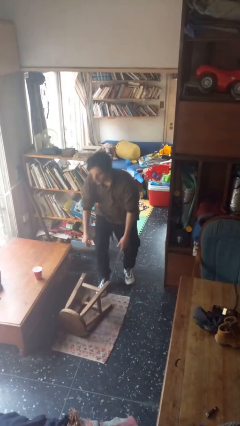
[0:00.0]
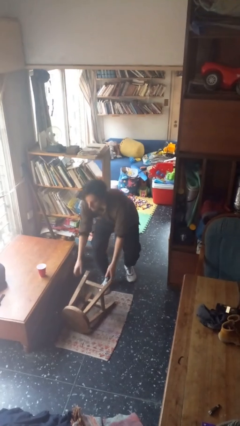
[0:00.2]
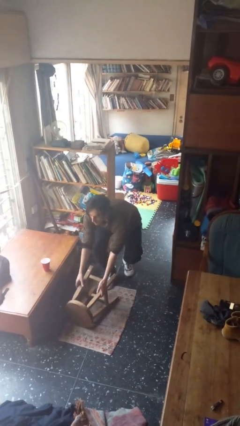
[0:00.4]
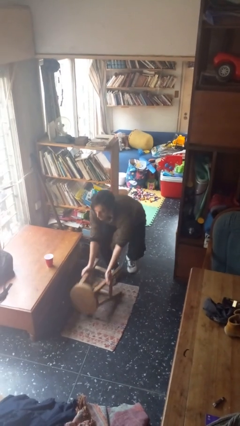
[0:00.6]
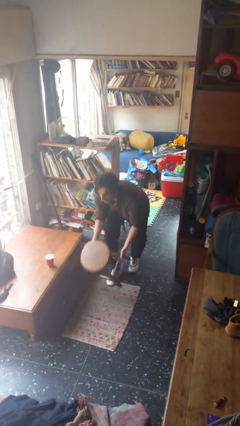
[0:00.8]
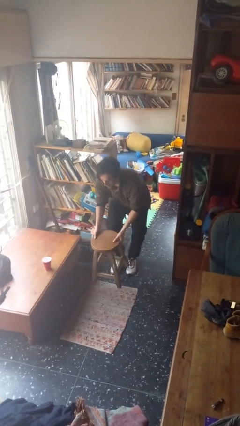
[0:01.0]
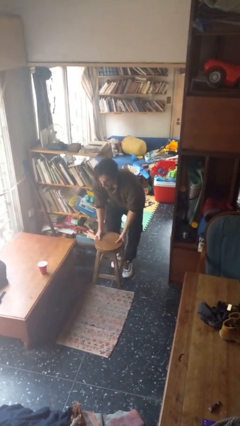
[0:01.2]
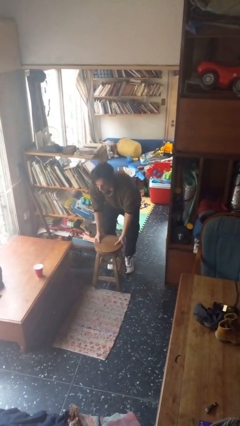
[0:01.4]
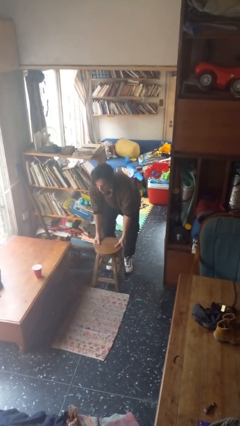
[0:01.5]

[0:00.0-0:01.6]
person sets upright furniture

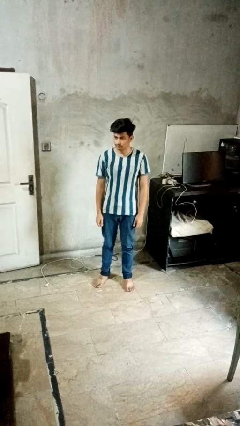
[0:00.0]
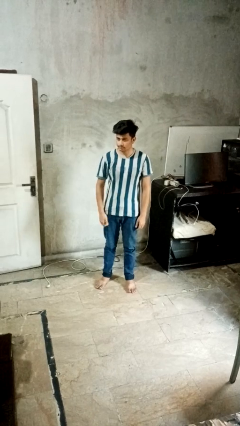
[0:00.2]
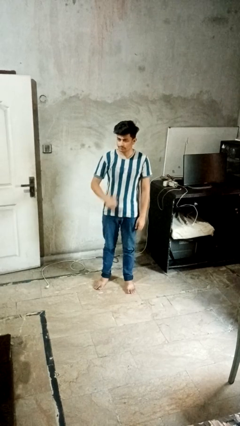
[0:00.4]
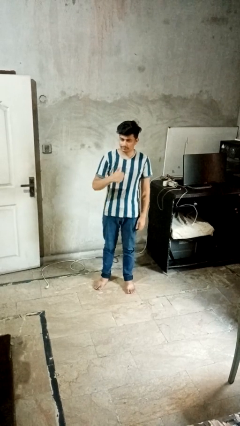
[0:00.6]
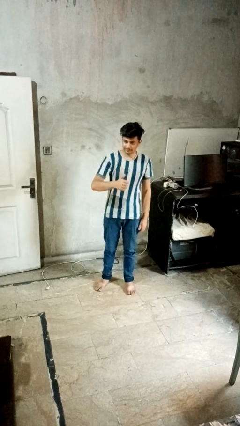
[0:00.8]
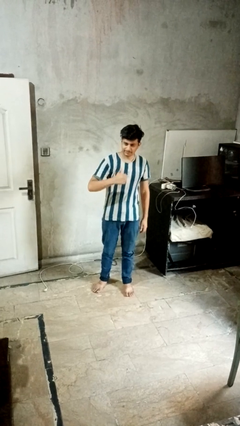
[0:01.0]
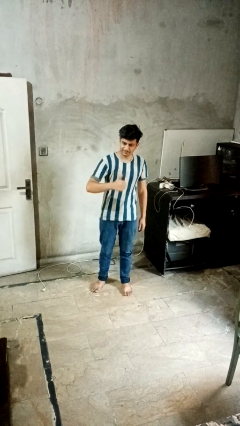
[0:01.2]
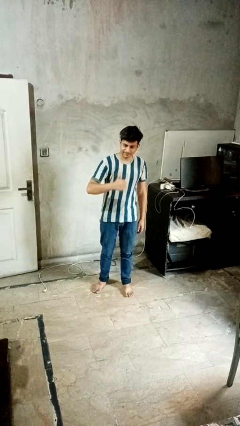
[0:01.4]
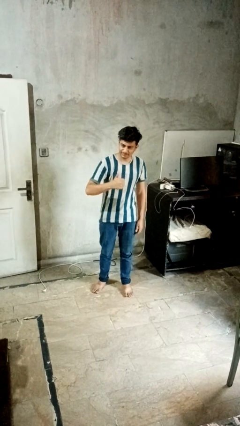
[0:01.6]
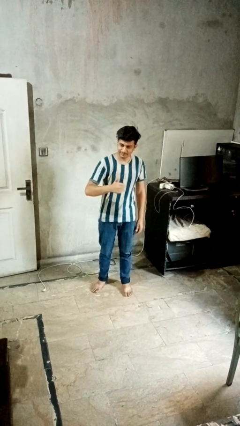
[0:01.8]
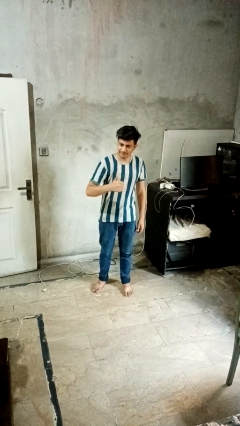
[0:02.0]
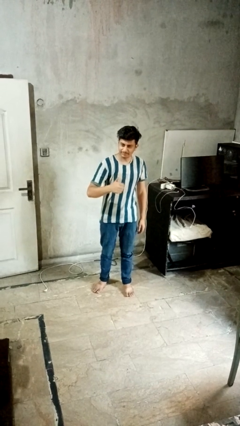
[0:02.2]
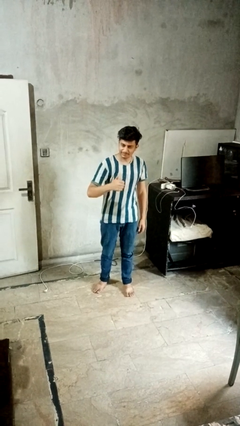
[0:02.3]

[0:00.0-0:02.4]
person gestures thumbs up

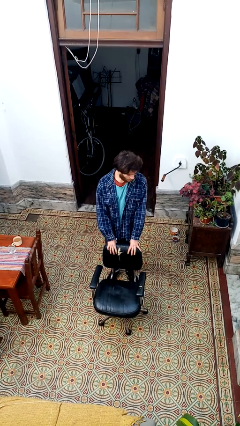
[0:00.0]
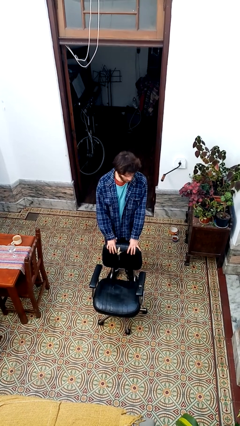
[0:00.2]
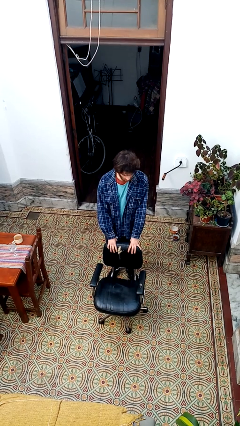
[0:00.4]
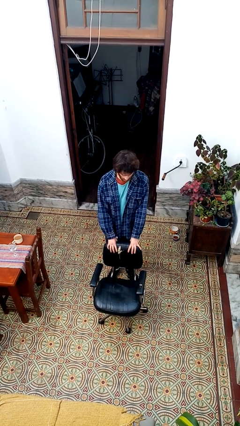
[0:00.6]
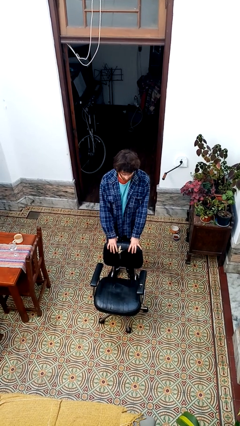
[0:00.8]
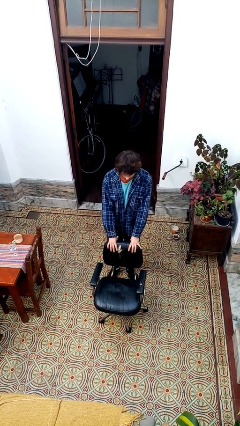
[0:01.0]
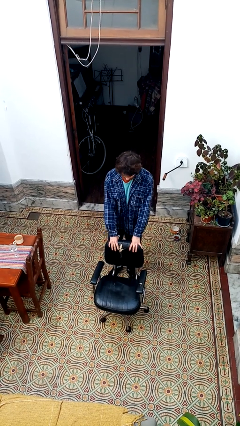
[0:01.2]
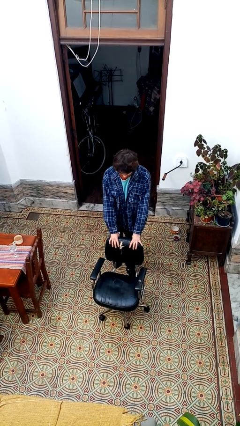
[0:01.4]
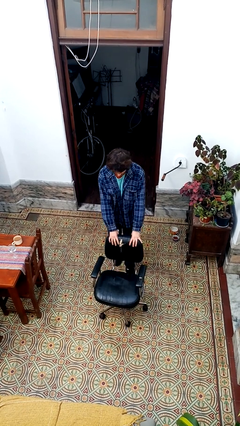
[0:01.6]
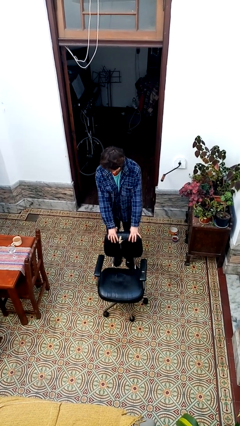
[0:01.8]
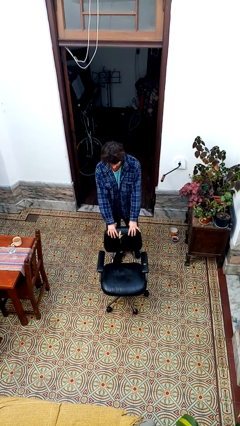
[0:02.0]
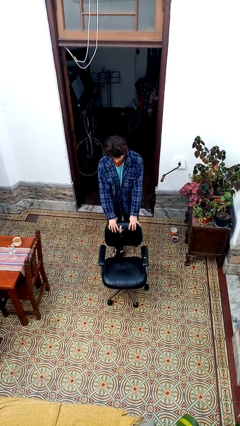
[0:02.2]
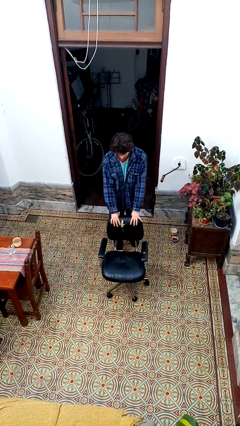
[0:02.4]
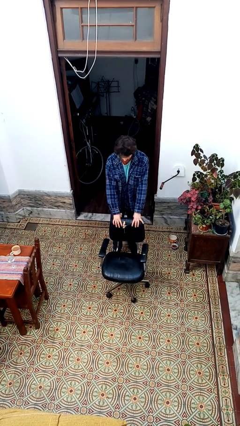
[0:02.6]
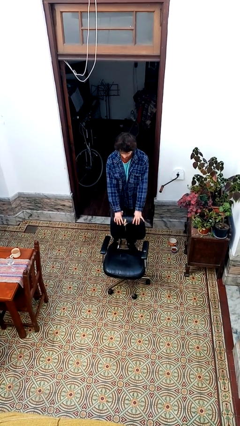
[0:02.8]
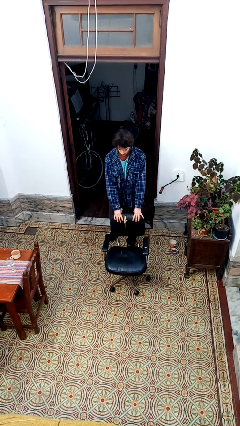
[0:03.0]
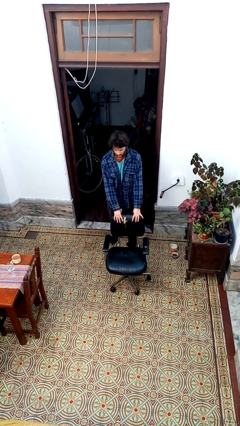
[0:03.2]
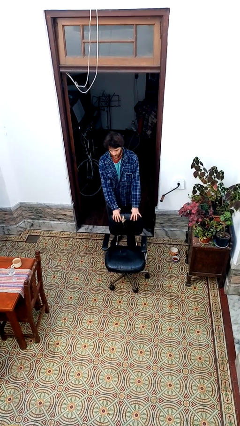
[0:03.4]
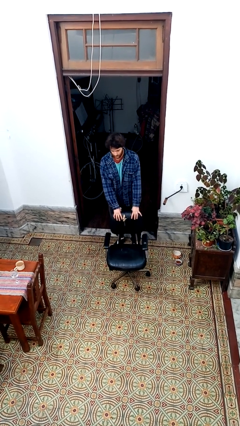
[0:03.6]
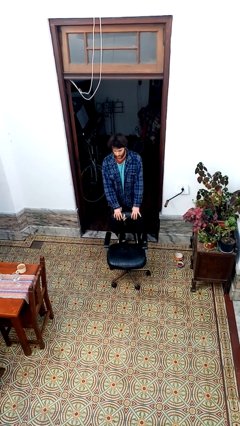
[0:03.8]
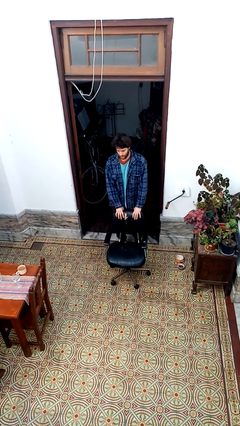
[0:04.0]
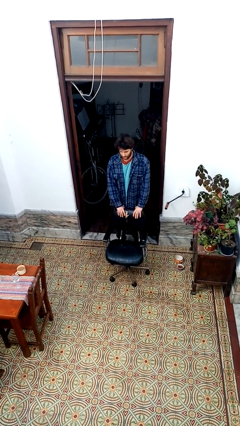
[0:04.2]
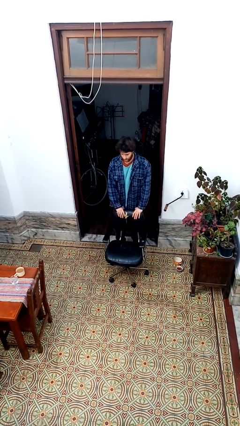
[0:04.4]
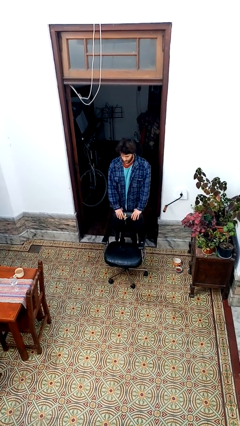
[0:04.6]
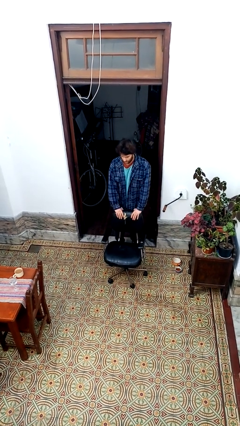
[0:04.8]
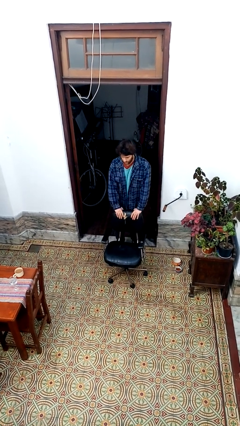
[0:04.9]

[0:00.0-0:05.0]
person pulls wheeled cart

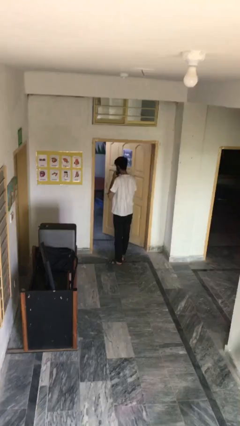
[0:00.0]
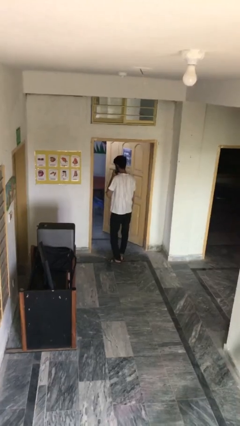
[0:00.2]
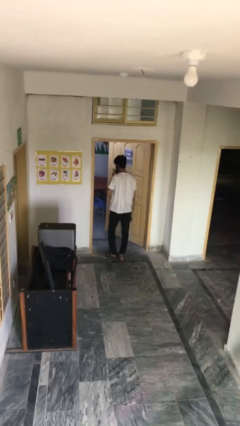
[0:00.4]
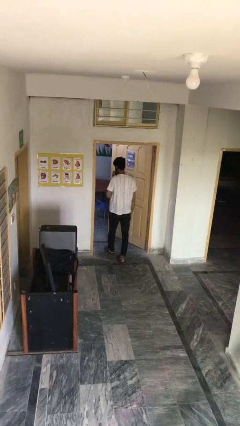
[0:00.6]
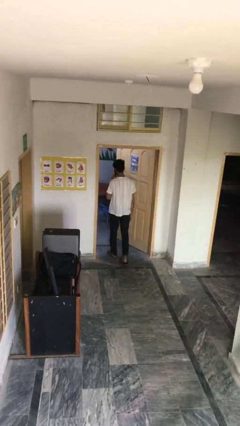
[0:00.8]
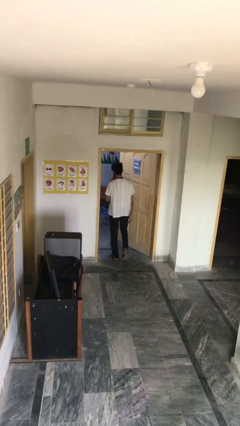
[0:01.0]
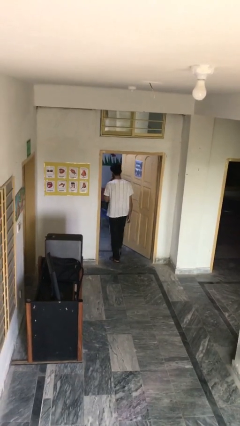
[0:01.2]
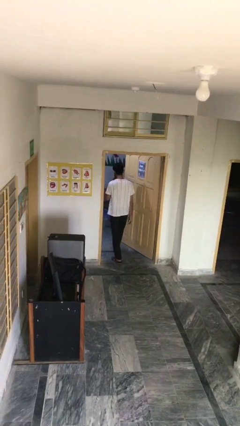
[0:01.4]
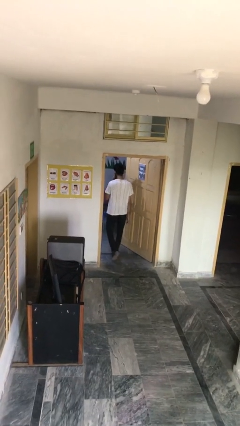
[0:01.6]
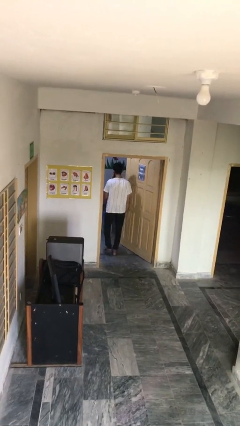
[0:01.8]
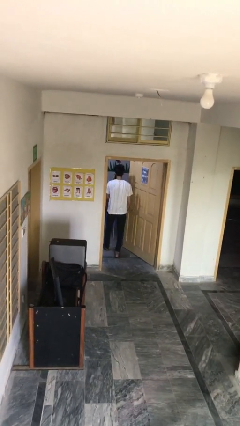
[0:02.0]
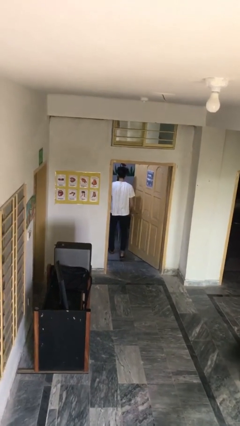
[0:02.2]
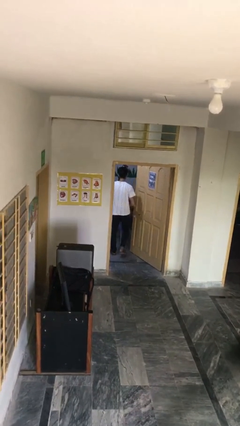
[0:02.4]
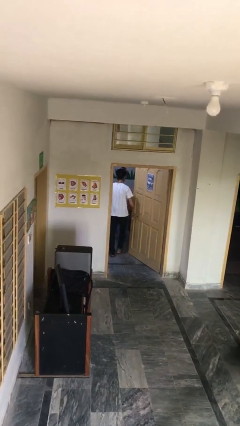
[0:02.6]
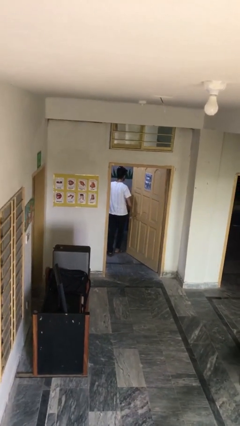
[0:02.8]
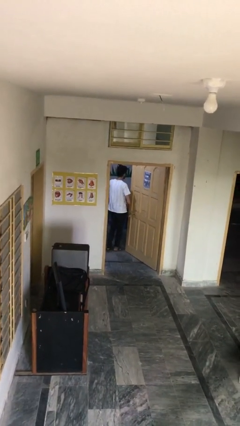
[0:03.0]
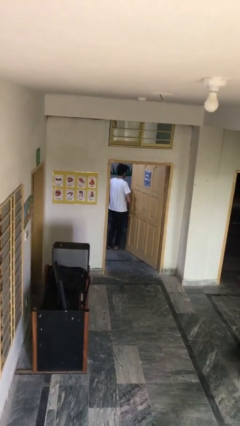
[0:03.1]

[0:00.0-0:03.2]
person exits scene through structure

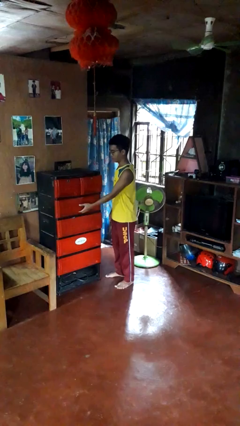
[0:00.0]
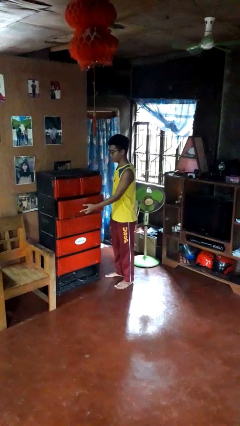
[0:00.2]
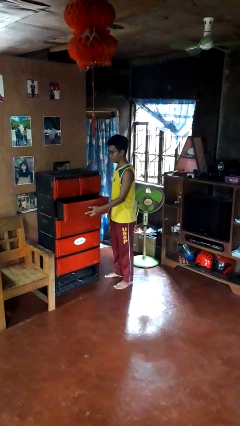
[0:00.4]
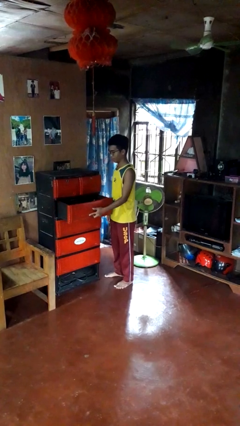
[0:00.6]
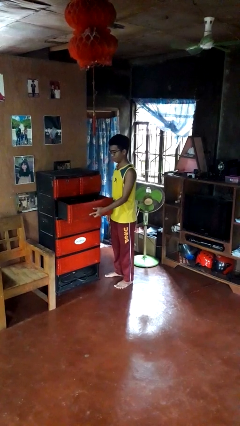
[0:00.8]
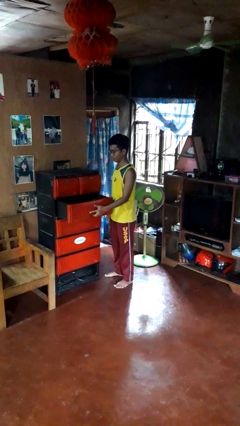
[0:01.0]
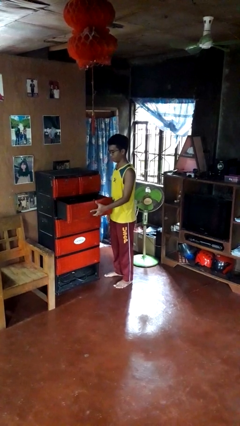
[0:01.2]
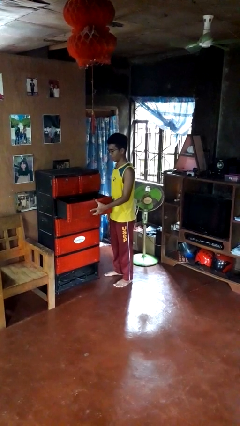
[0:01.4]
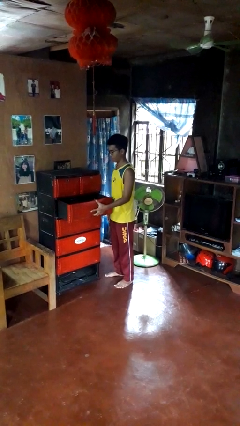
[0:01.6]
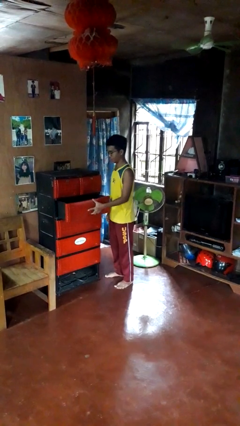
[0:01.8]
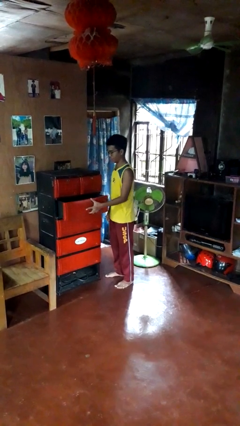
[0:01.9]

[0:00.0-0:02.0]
person opens dresser drawer

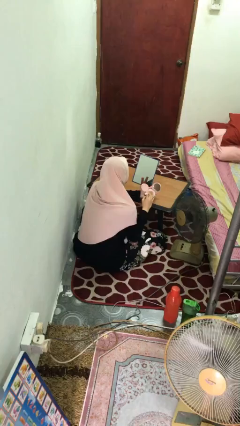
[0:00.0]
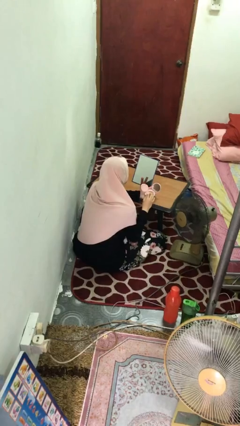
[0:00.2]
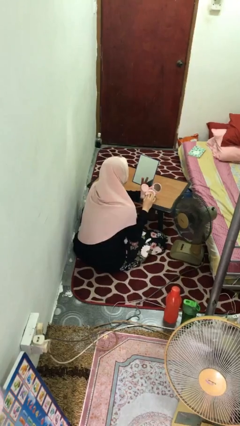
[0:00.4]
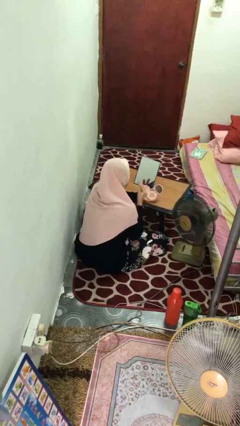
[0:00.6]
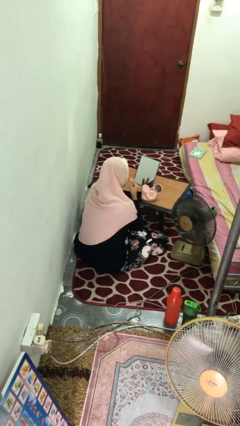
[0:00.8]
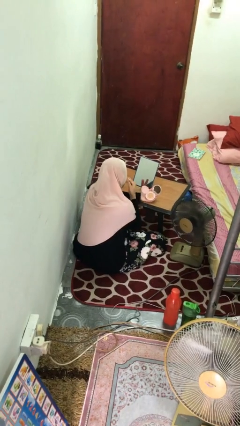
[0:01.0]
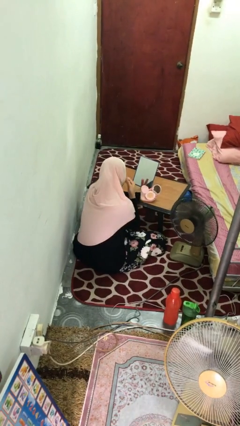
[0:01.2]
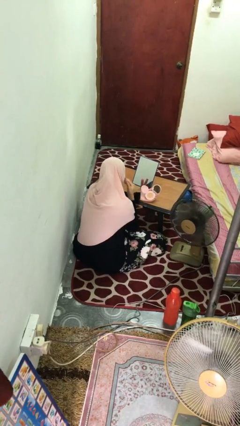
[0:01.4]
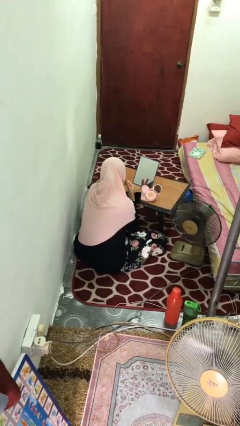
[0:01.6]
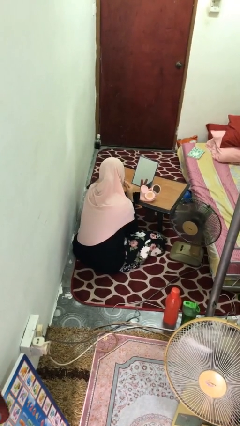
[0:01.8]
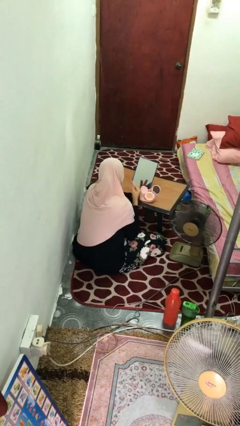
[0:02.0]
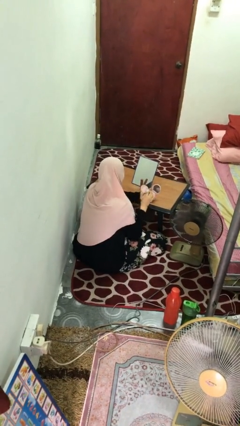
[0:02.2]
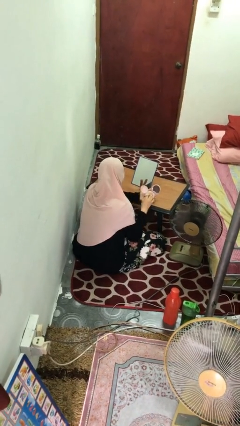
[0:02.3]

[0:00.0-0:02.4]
person applies foundation makeup

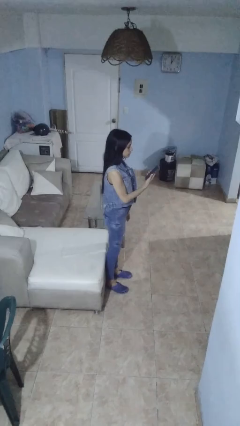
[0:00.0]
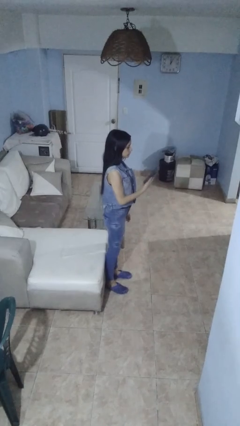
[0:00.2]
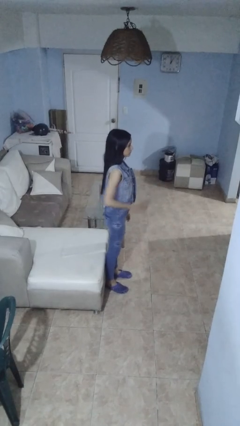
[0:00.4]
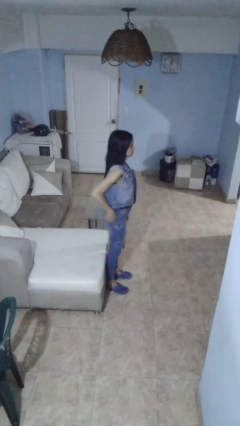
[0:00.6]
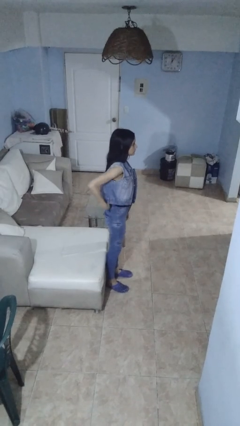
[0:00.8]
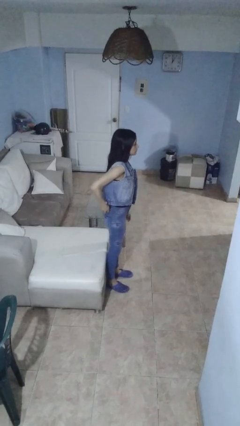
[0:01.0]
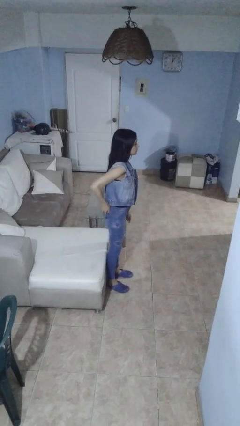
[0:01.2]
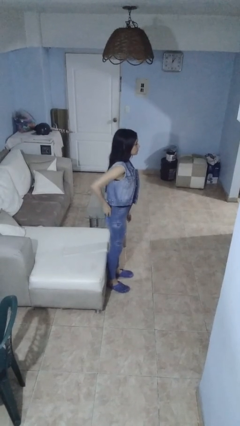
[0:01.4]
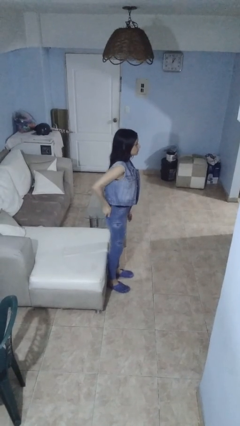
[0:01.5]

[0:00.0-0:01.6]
person puts phone into pocket
